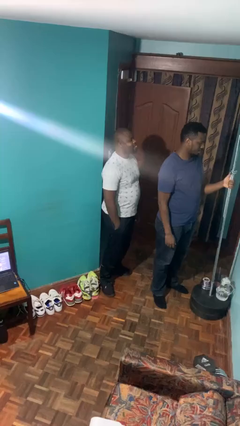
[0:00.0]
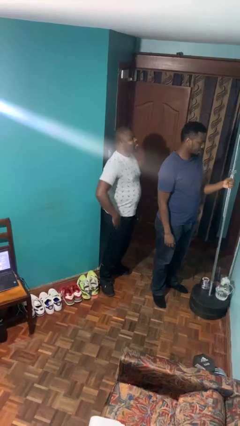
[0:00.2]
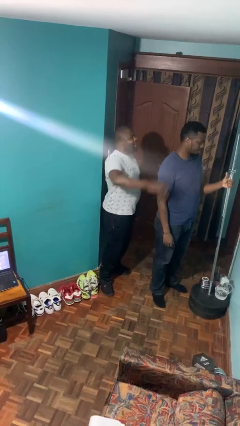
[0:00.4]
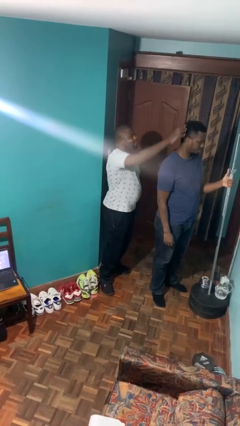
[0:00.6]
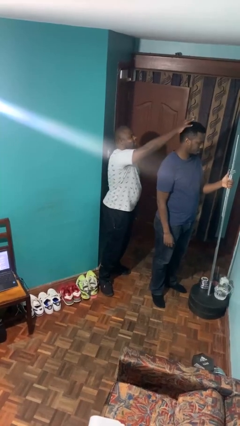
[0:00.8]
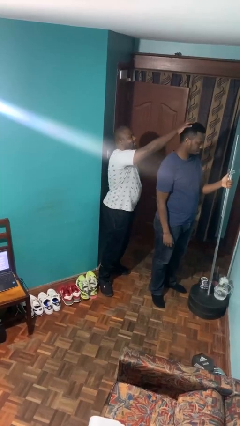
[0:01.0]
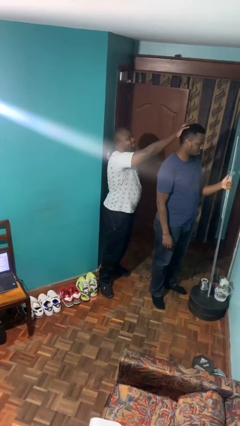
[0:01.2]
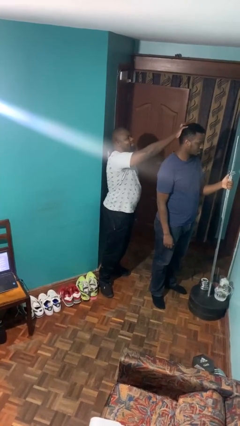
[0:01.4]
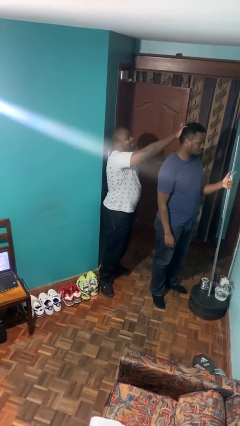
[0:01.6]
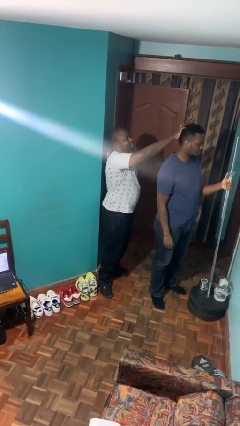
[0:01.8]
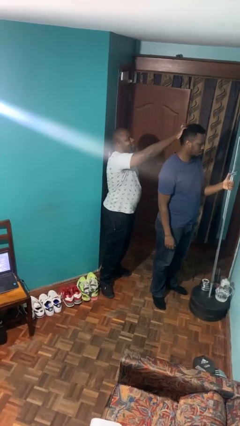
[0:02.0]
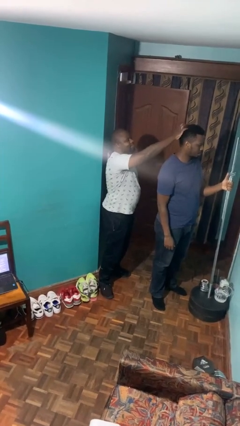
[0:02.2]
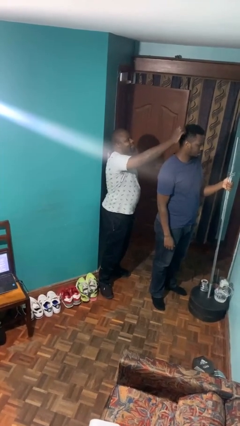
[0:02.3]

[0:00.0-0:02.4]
person grabs person by hair

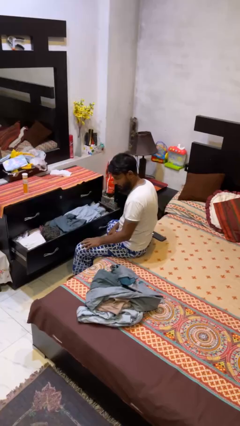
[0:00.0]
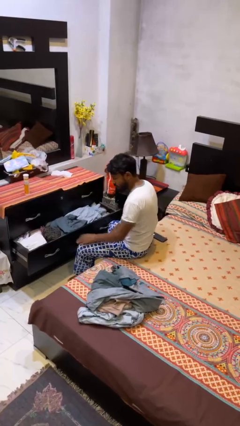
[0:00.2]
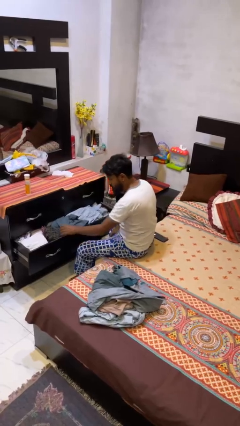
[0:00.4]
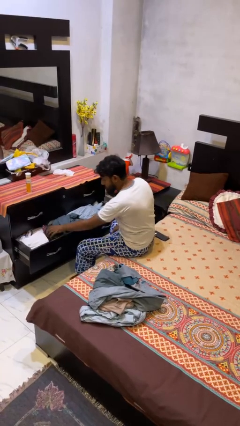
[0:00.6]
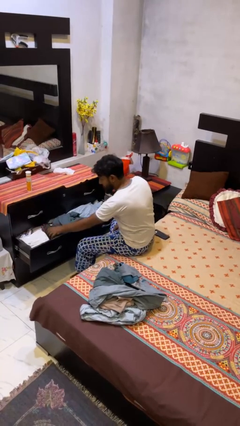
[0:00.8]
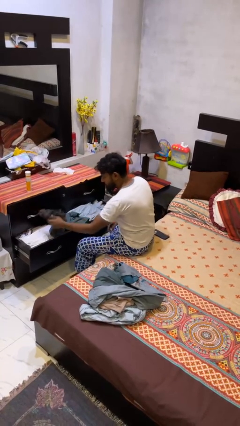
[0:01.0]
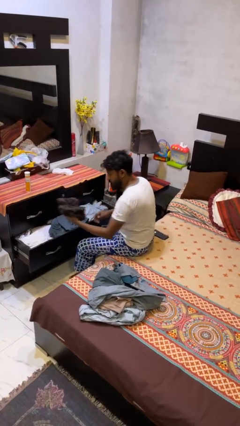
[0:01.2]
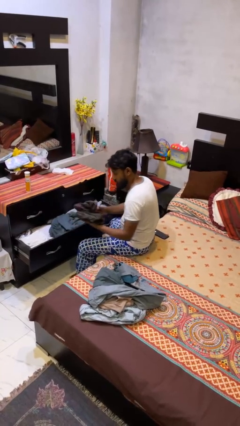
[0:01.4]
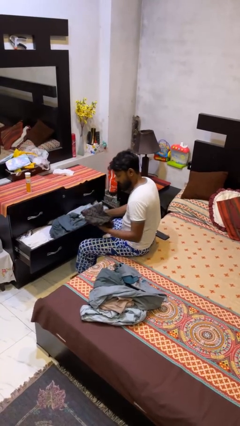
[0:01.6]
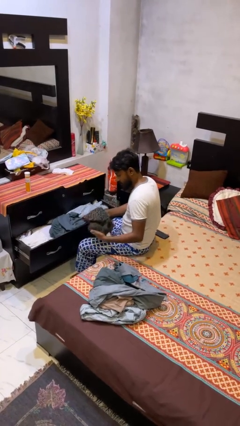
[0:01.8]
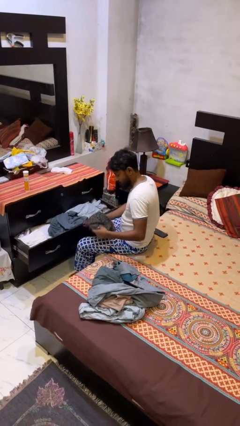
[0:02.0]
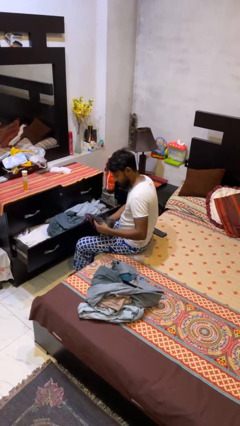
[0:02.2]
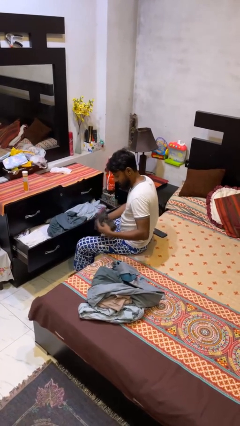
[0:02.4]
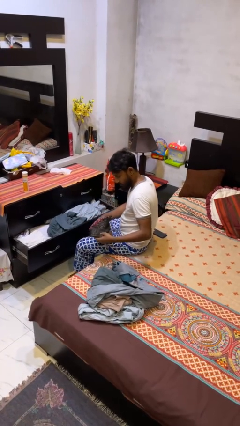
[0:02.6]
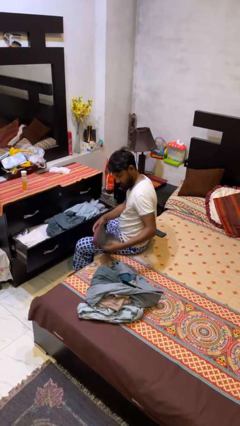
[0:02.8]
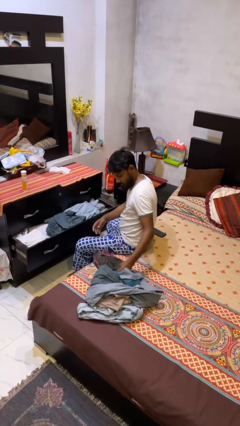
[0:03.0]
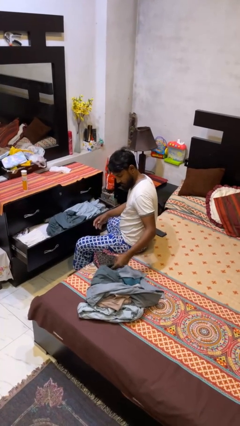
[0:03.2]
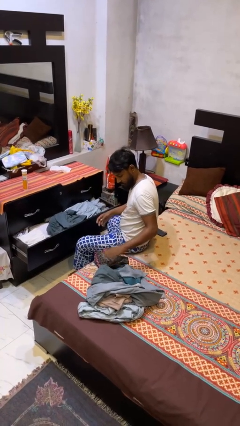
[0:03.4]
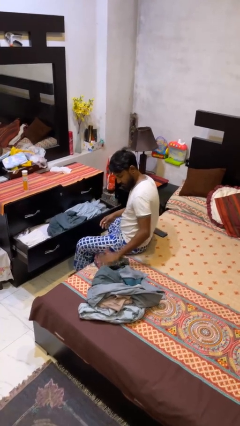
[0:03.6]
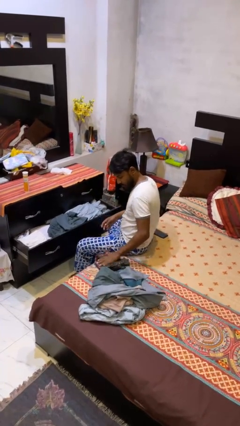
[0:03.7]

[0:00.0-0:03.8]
person takes clothes from dresser

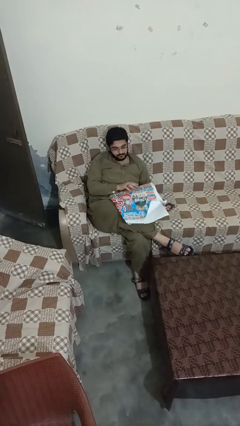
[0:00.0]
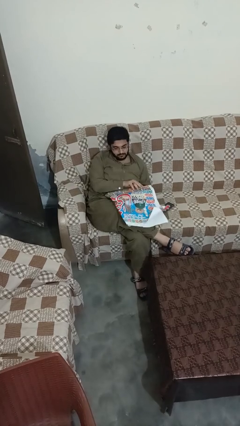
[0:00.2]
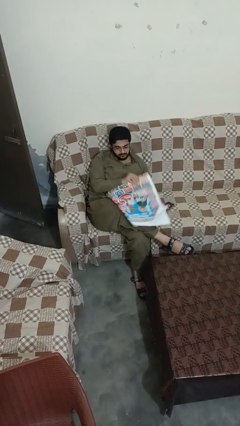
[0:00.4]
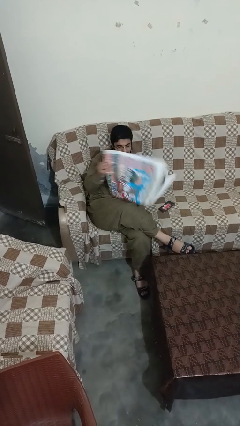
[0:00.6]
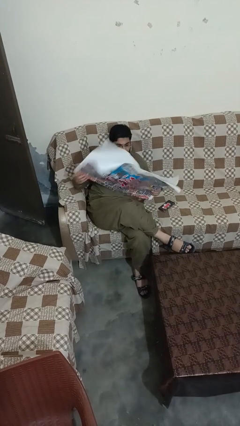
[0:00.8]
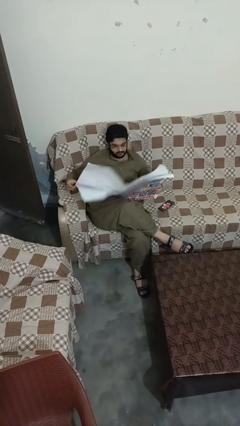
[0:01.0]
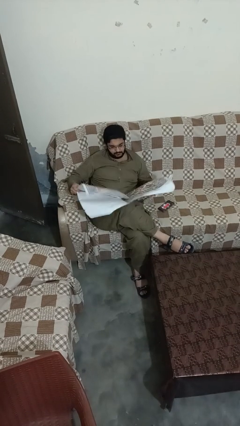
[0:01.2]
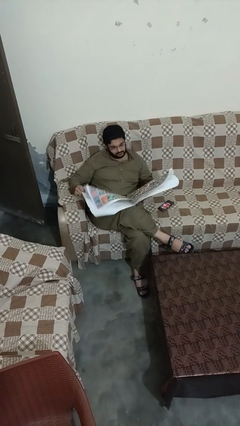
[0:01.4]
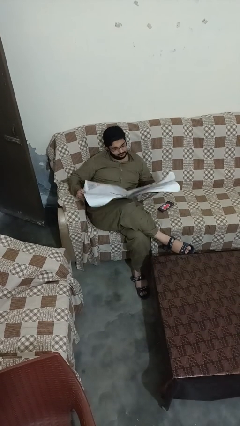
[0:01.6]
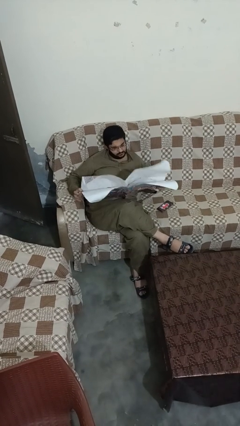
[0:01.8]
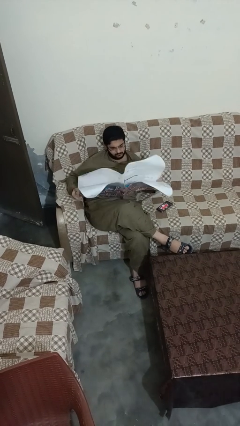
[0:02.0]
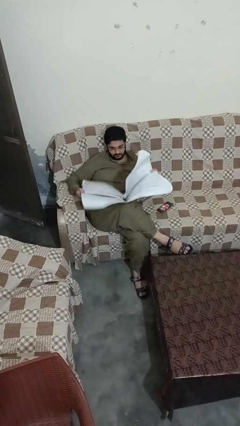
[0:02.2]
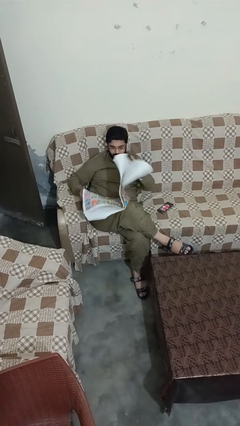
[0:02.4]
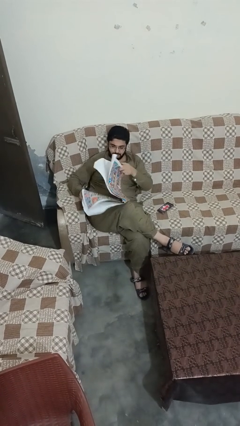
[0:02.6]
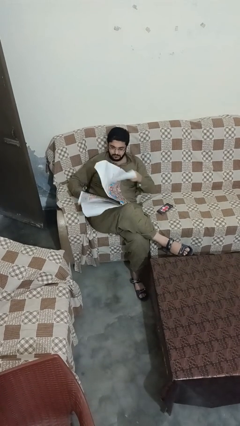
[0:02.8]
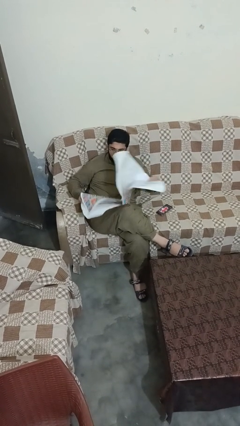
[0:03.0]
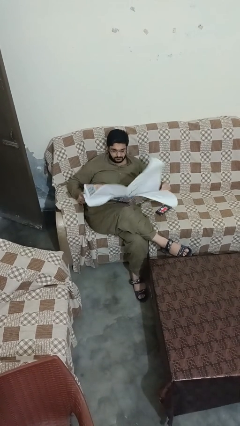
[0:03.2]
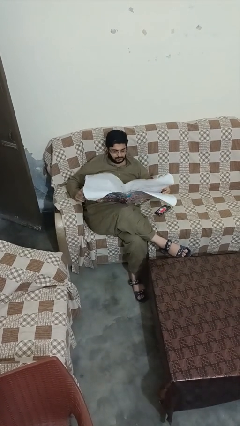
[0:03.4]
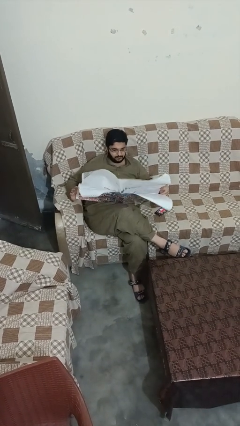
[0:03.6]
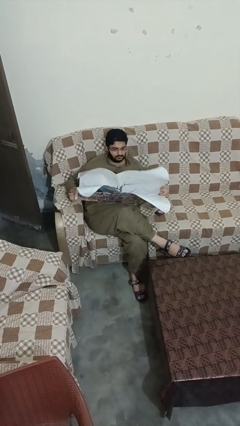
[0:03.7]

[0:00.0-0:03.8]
person reads newspaper

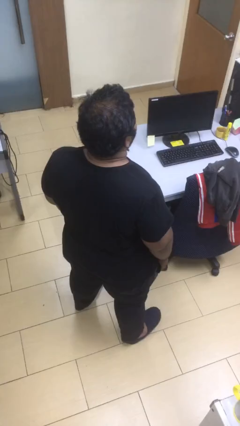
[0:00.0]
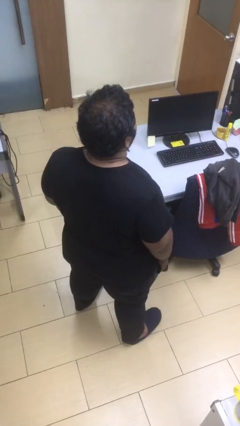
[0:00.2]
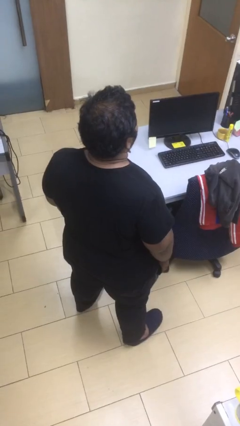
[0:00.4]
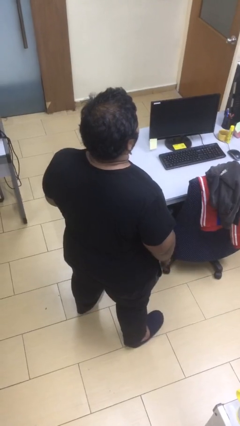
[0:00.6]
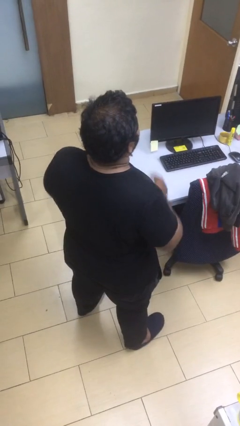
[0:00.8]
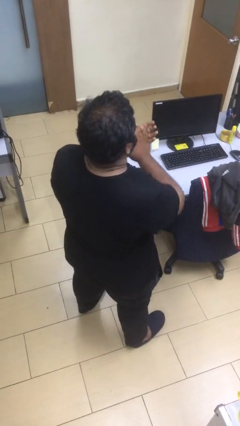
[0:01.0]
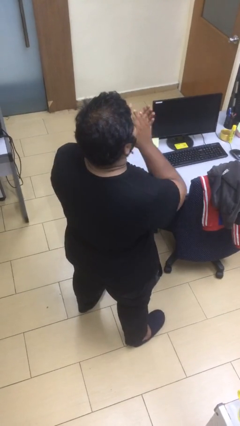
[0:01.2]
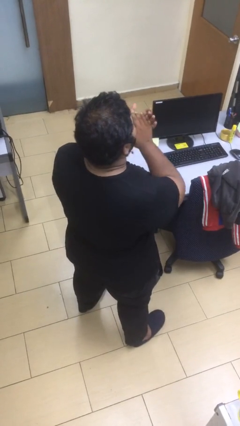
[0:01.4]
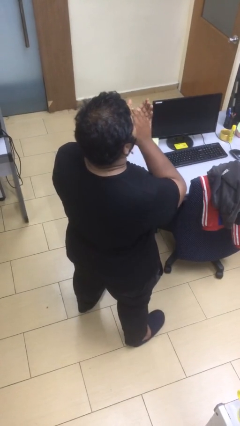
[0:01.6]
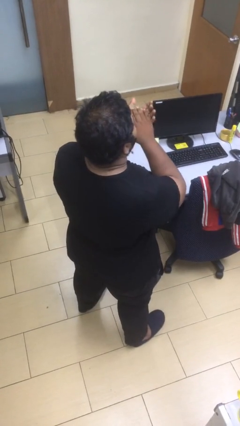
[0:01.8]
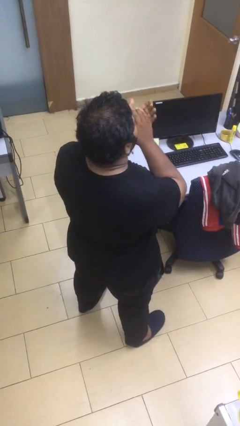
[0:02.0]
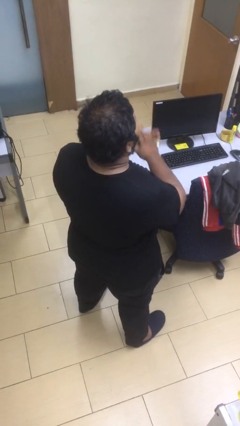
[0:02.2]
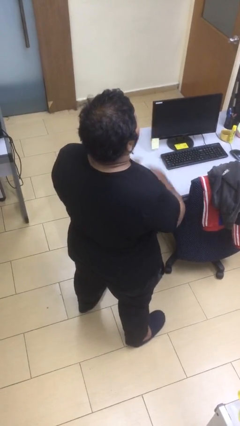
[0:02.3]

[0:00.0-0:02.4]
person claps hands

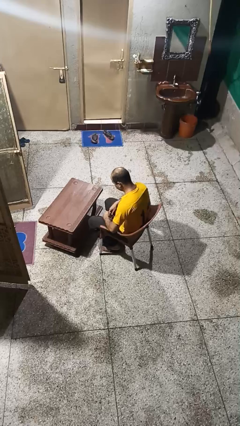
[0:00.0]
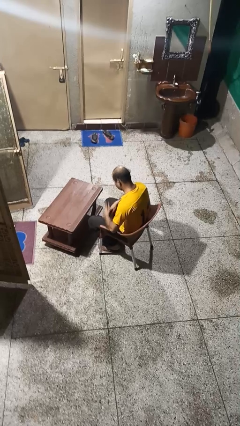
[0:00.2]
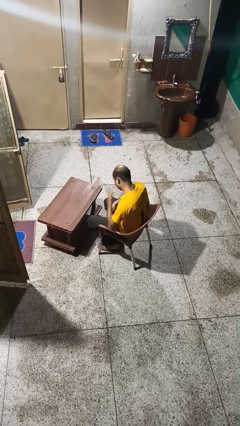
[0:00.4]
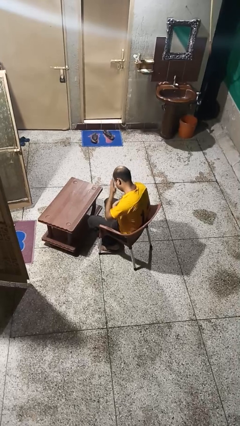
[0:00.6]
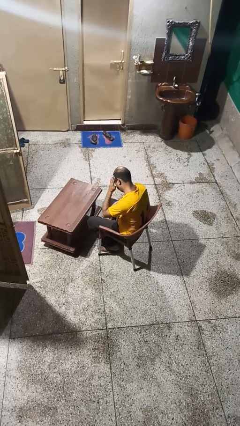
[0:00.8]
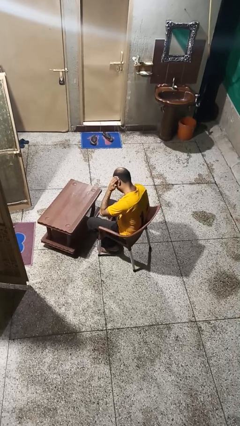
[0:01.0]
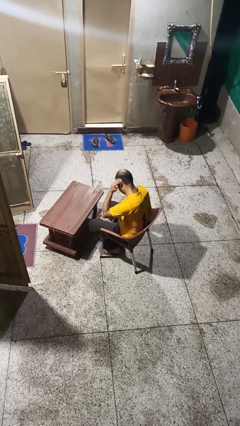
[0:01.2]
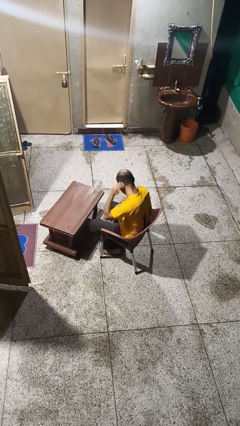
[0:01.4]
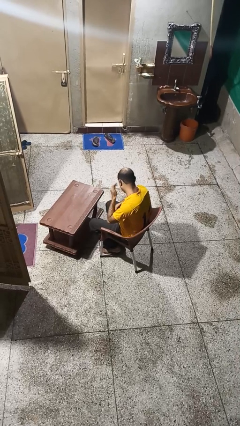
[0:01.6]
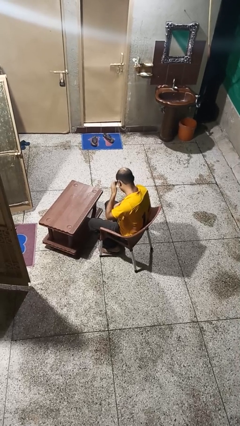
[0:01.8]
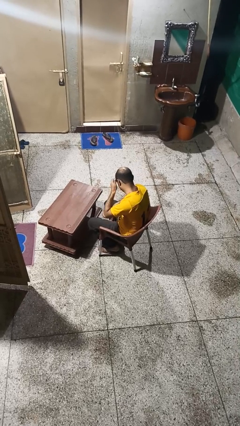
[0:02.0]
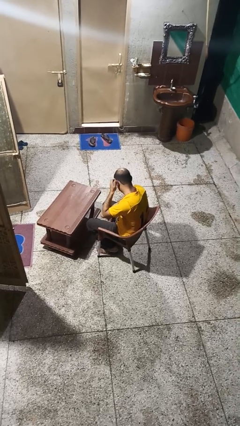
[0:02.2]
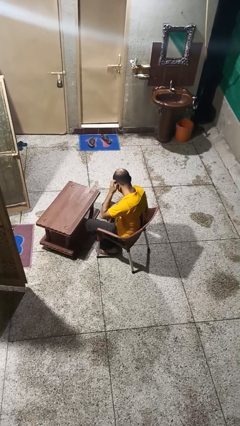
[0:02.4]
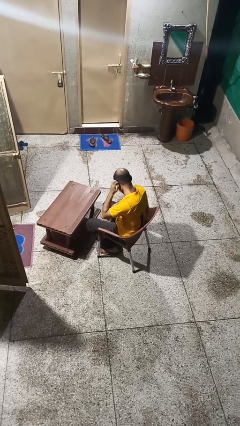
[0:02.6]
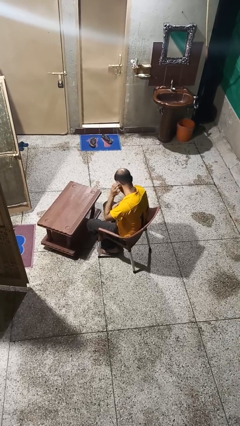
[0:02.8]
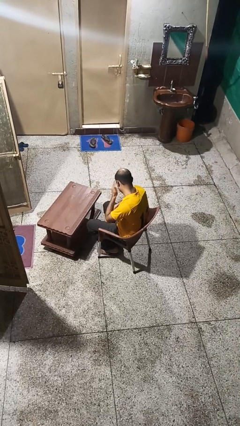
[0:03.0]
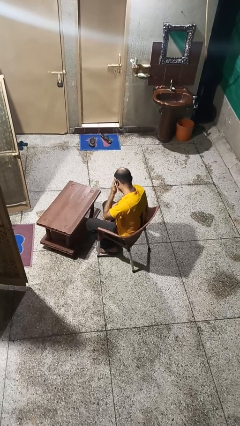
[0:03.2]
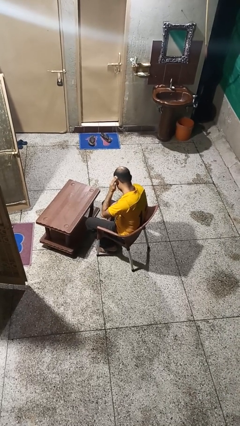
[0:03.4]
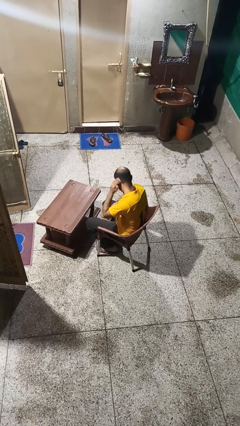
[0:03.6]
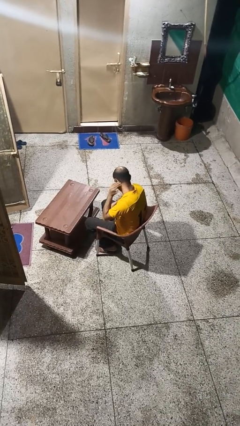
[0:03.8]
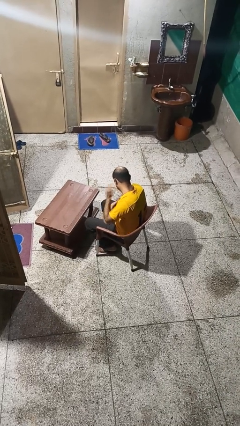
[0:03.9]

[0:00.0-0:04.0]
person strokes hair

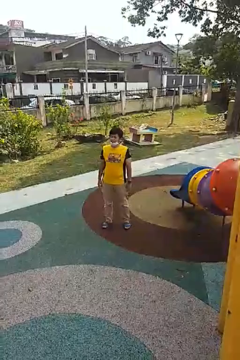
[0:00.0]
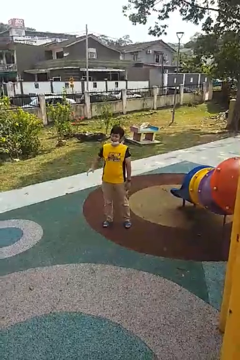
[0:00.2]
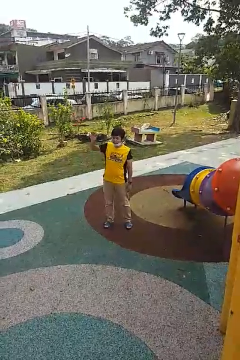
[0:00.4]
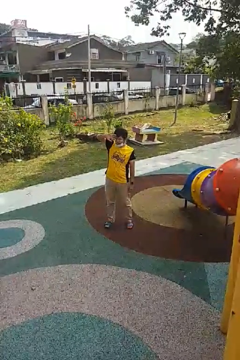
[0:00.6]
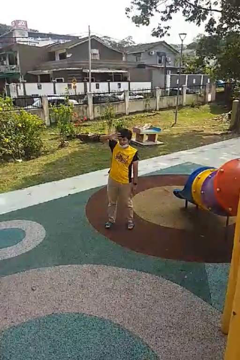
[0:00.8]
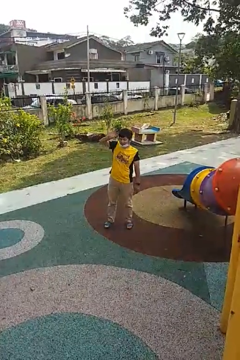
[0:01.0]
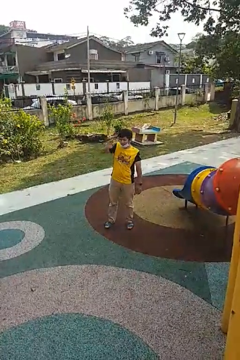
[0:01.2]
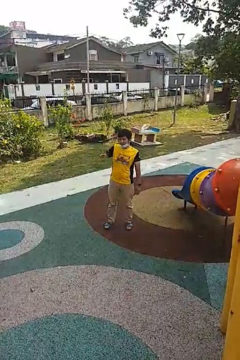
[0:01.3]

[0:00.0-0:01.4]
person waves at person

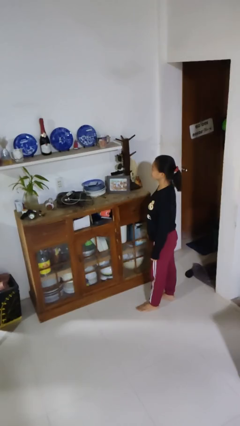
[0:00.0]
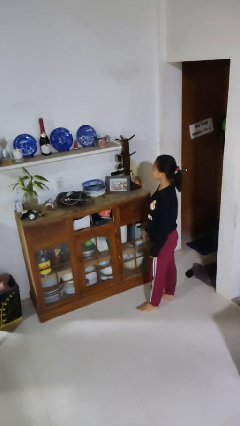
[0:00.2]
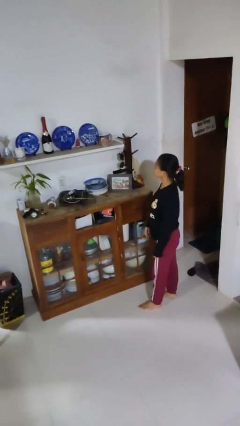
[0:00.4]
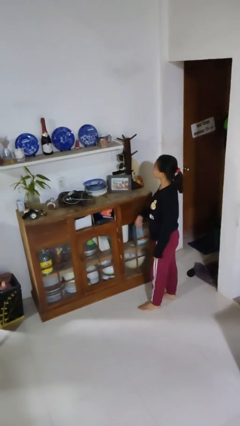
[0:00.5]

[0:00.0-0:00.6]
person picks up object from shelf
